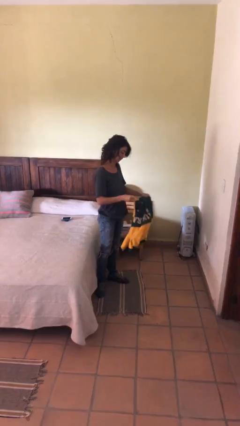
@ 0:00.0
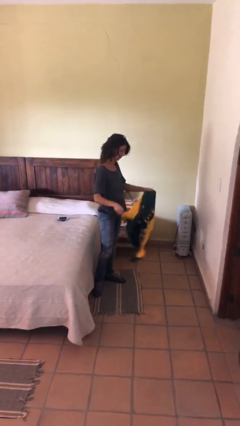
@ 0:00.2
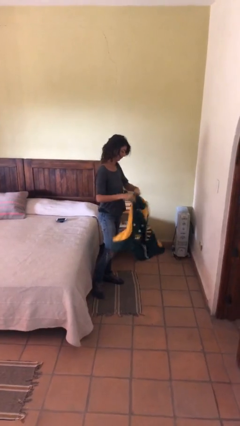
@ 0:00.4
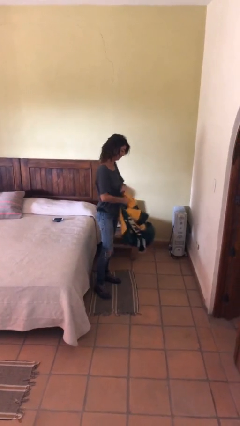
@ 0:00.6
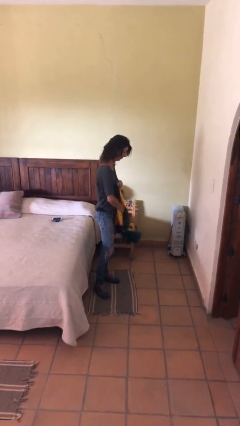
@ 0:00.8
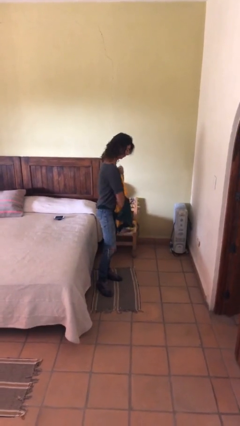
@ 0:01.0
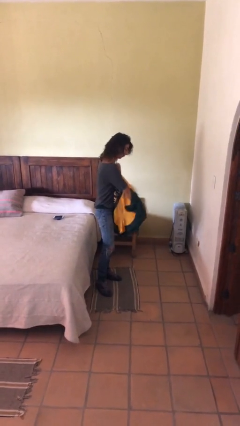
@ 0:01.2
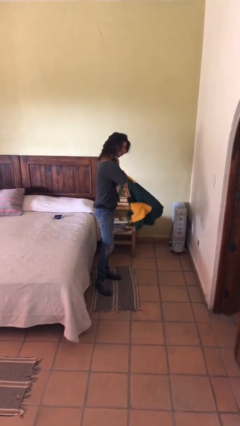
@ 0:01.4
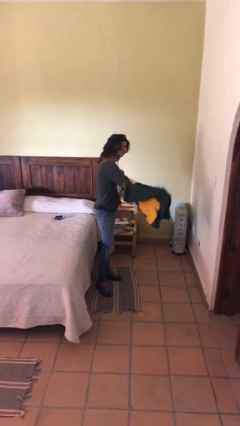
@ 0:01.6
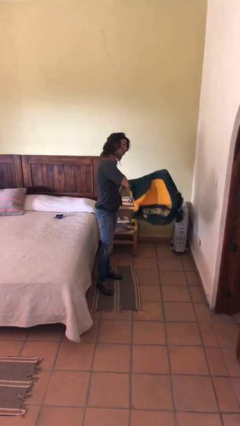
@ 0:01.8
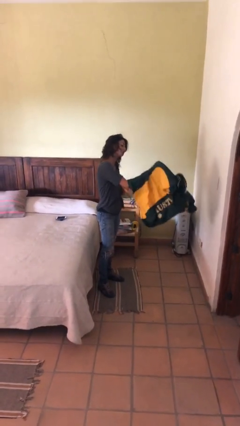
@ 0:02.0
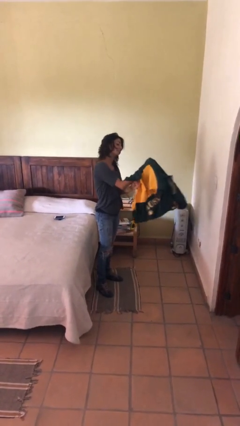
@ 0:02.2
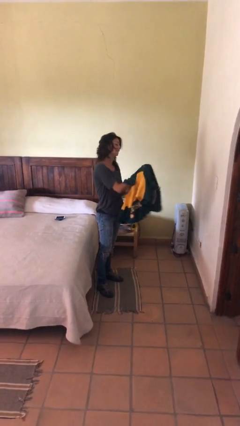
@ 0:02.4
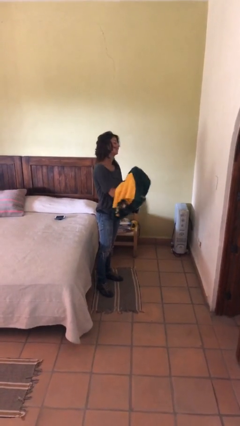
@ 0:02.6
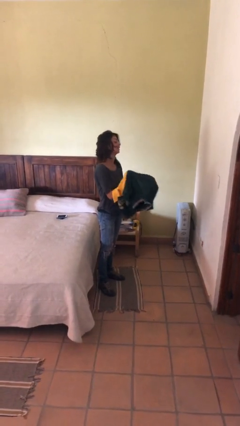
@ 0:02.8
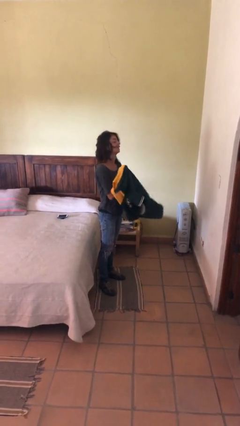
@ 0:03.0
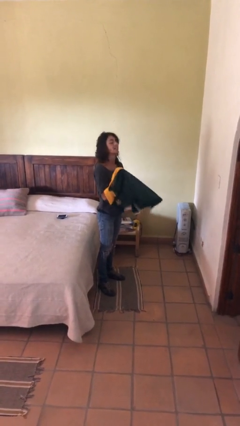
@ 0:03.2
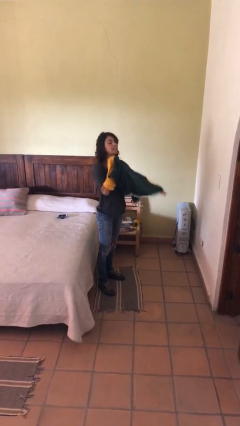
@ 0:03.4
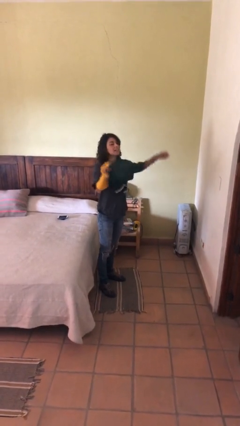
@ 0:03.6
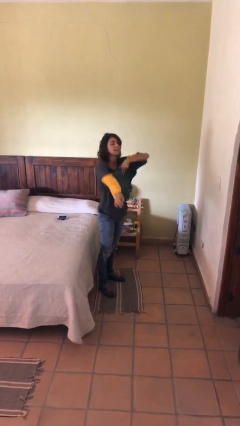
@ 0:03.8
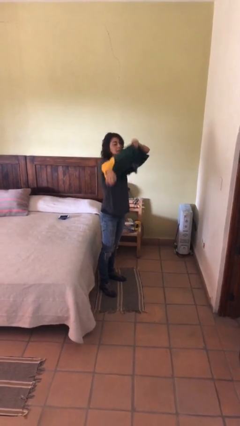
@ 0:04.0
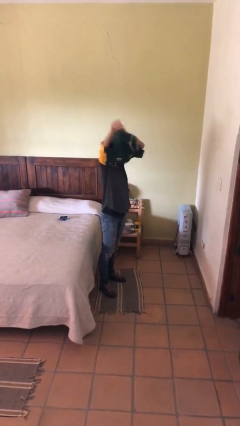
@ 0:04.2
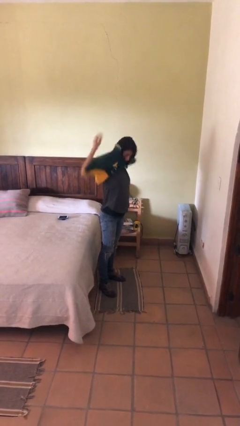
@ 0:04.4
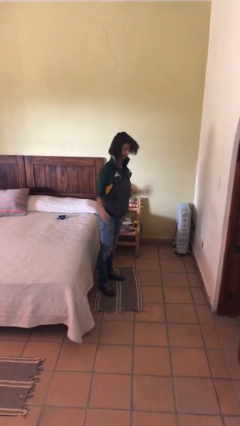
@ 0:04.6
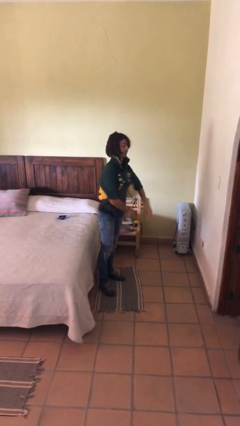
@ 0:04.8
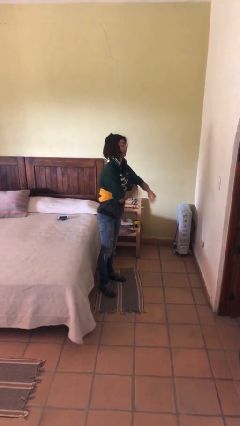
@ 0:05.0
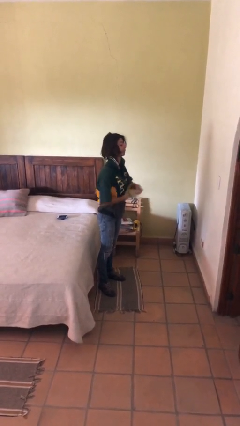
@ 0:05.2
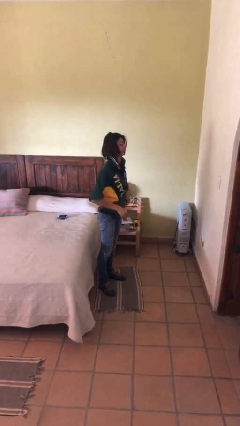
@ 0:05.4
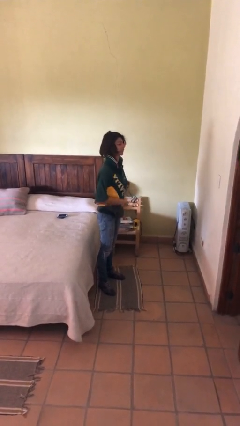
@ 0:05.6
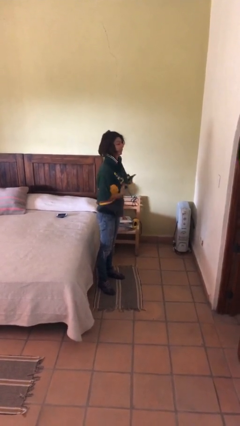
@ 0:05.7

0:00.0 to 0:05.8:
person puts on shirt

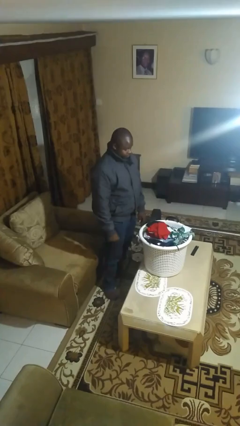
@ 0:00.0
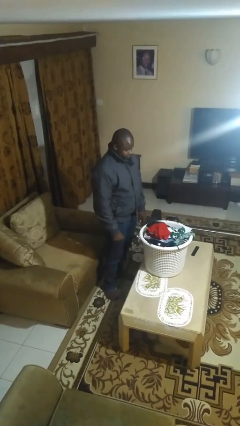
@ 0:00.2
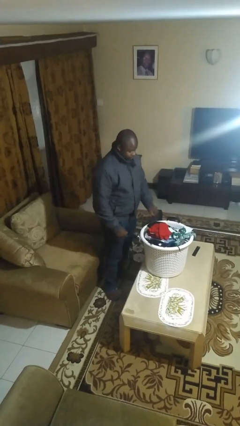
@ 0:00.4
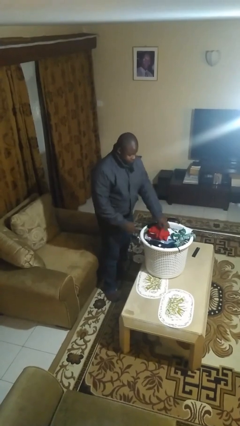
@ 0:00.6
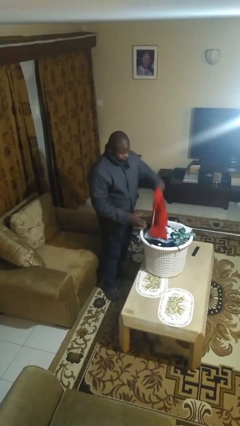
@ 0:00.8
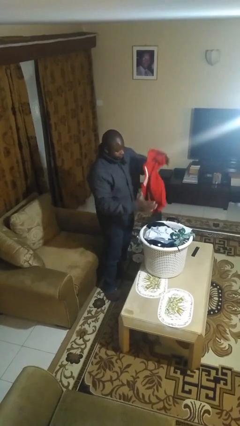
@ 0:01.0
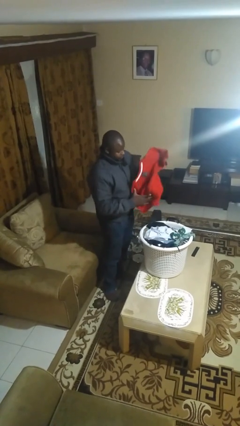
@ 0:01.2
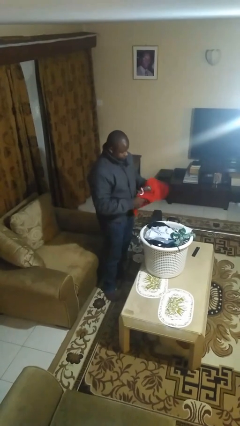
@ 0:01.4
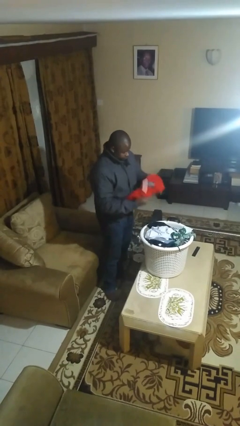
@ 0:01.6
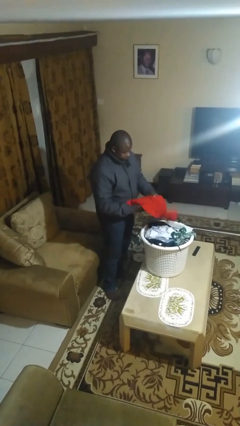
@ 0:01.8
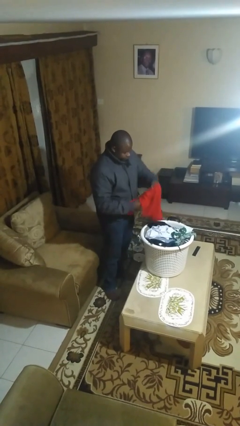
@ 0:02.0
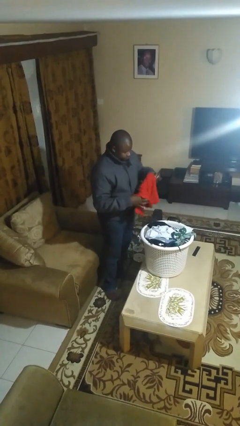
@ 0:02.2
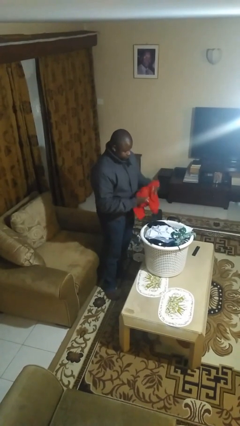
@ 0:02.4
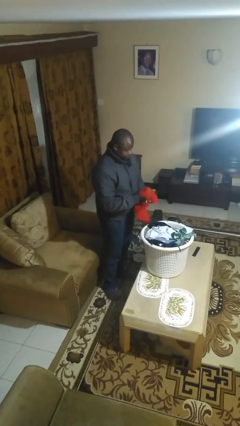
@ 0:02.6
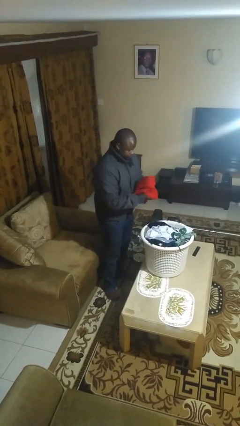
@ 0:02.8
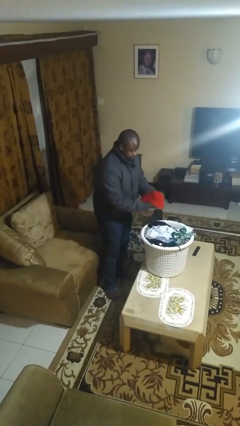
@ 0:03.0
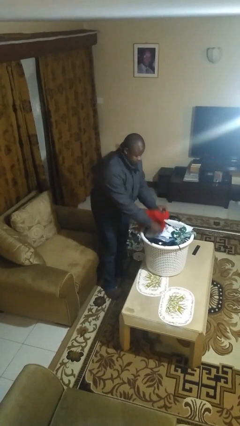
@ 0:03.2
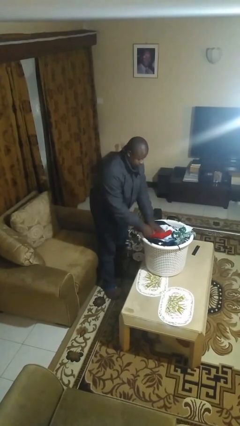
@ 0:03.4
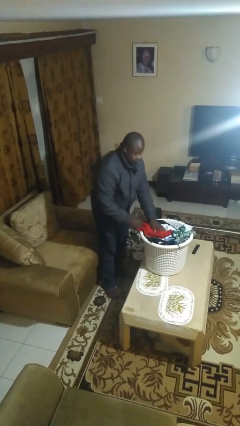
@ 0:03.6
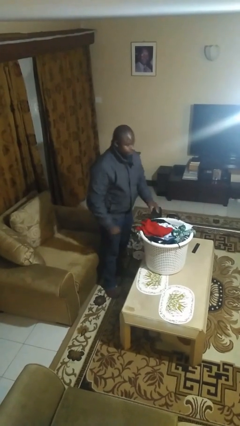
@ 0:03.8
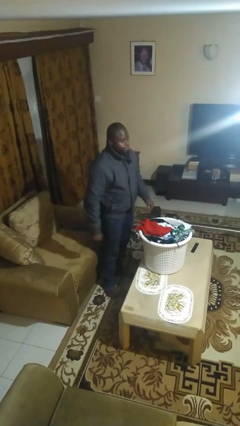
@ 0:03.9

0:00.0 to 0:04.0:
person folds shirt

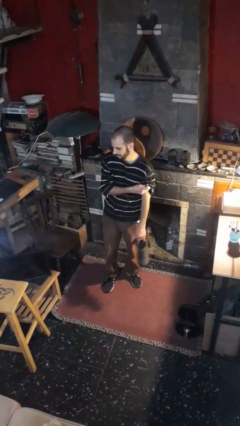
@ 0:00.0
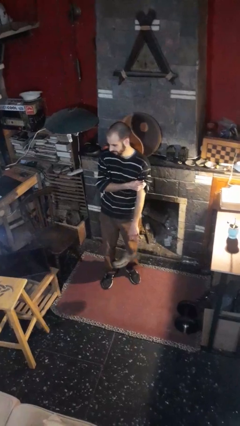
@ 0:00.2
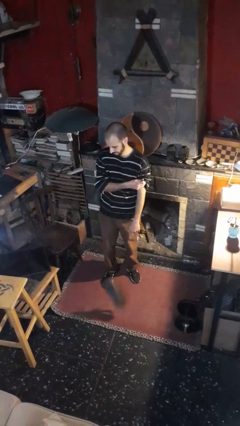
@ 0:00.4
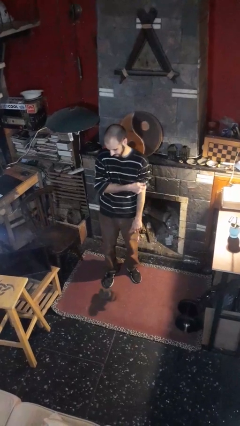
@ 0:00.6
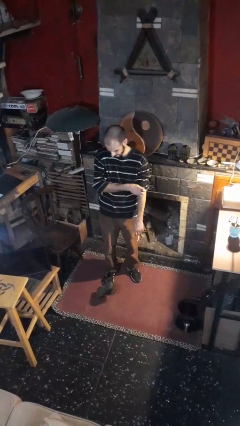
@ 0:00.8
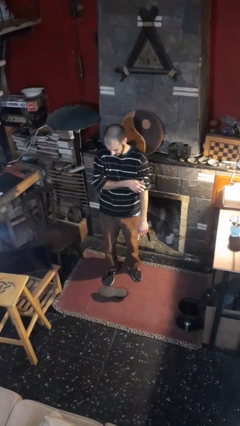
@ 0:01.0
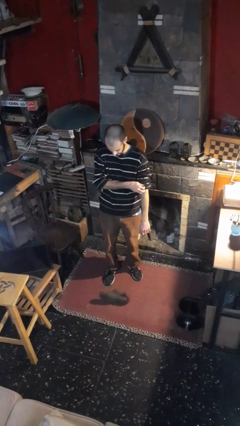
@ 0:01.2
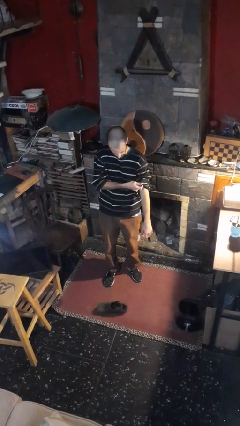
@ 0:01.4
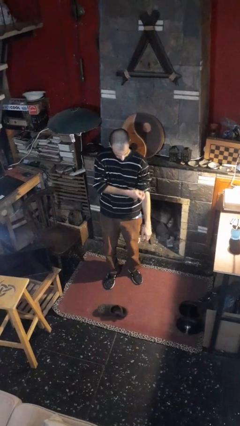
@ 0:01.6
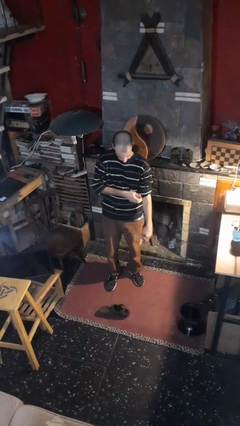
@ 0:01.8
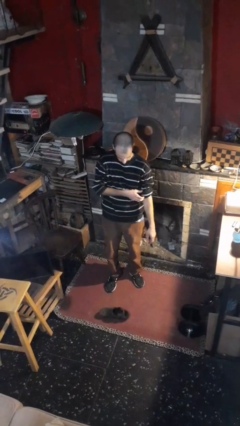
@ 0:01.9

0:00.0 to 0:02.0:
person drops object

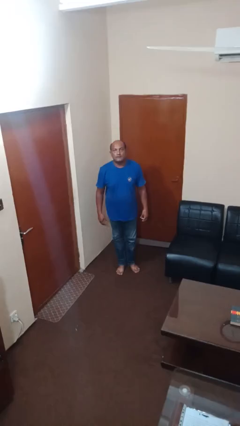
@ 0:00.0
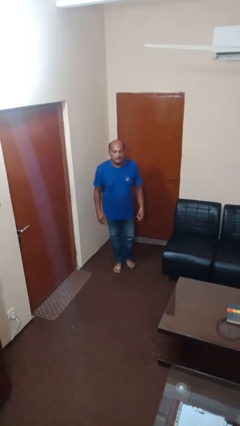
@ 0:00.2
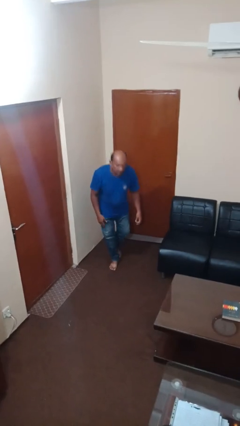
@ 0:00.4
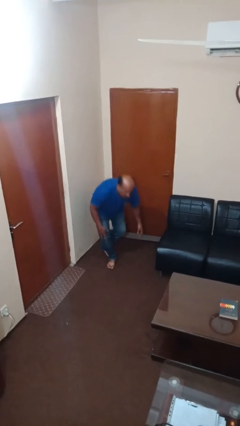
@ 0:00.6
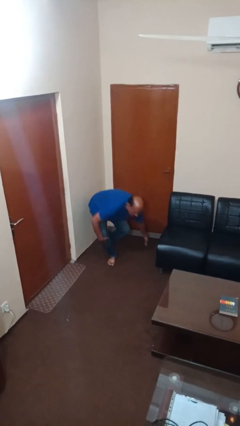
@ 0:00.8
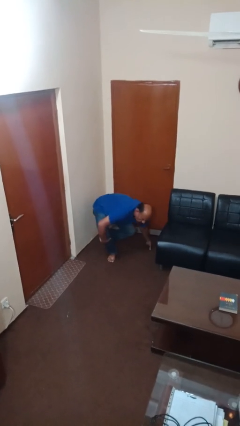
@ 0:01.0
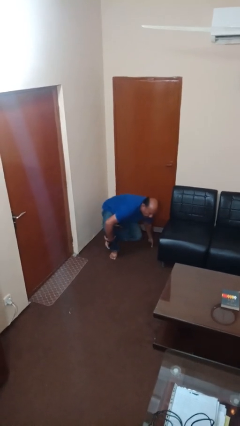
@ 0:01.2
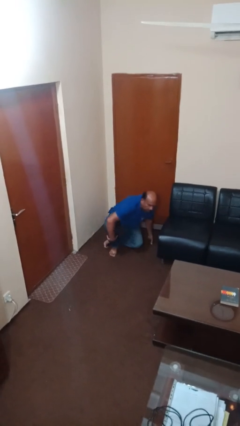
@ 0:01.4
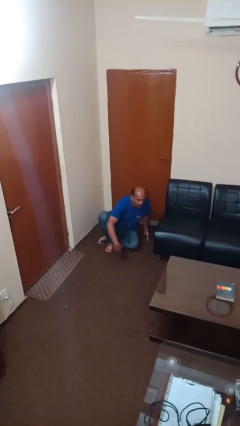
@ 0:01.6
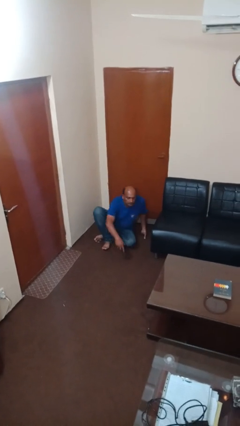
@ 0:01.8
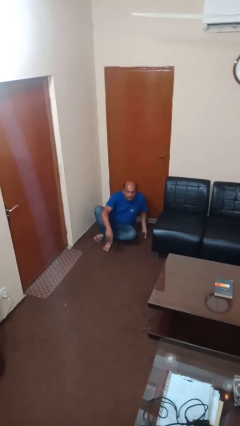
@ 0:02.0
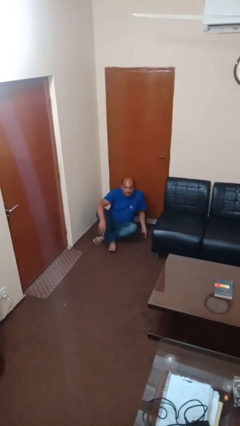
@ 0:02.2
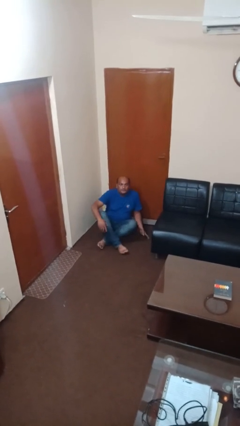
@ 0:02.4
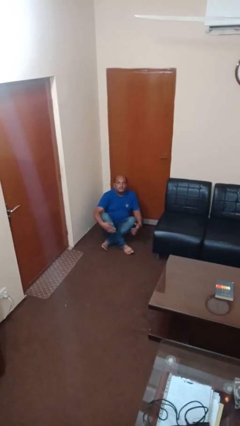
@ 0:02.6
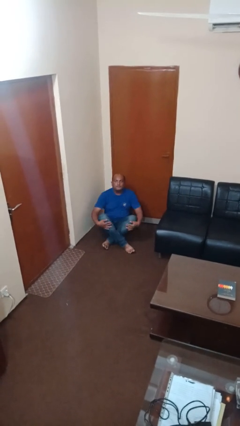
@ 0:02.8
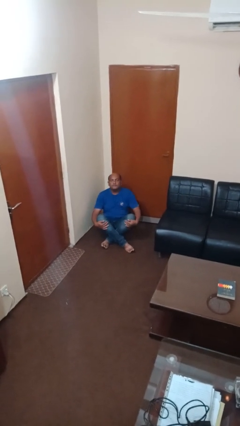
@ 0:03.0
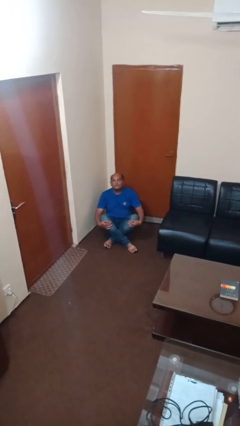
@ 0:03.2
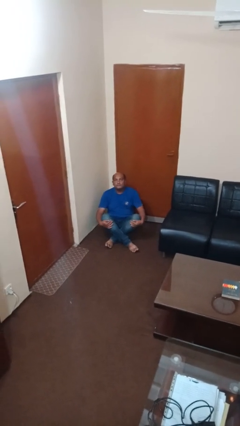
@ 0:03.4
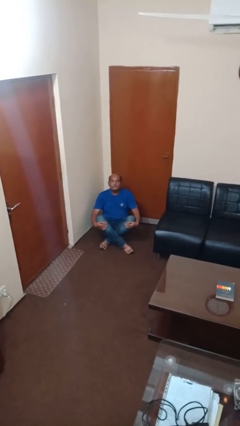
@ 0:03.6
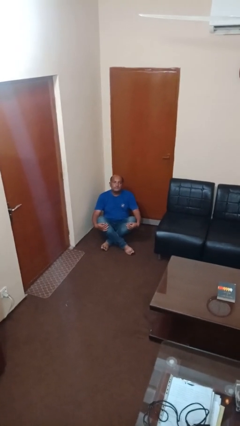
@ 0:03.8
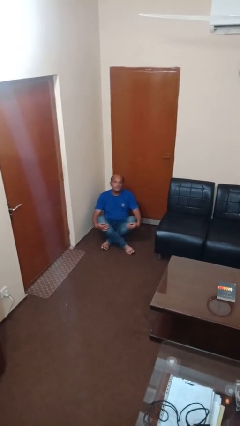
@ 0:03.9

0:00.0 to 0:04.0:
person sits crisscross

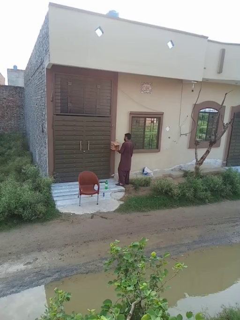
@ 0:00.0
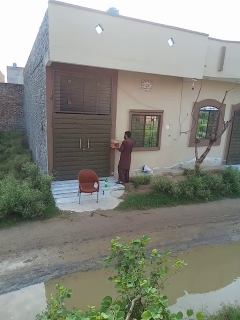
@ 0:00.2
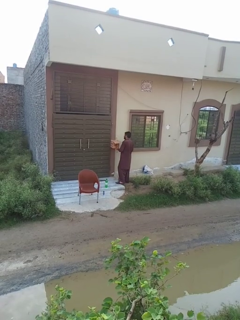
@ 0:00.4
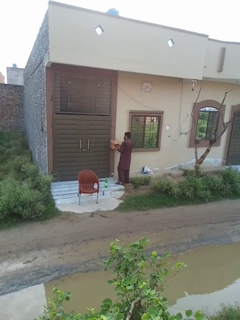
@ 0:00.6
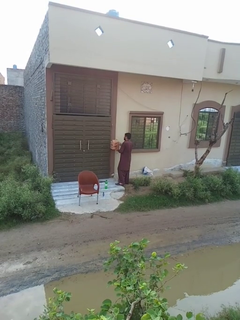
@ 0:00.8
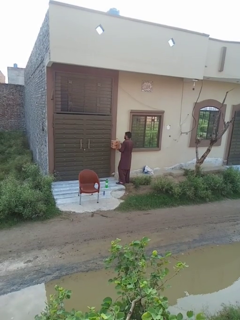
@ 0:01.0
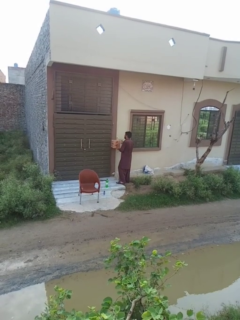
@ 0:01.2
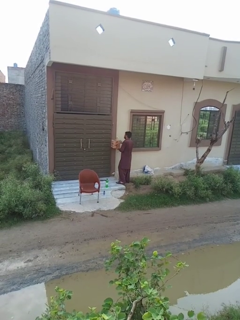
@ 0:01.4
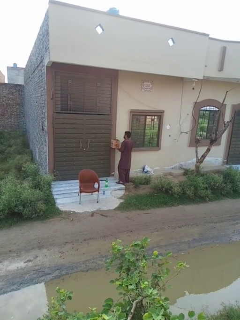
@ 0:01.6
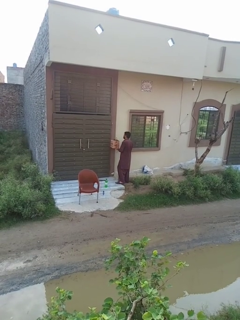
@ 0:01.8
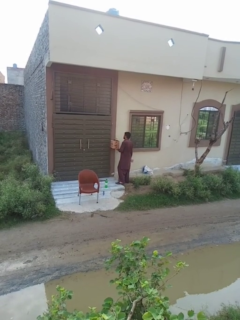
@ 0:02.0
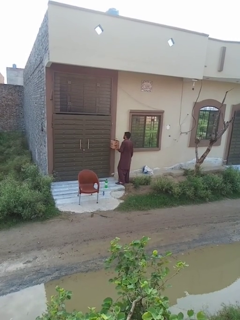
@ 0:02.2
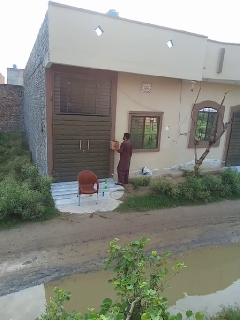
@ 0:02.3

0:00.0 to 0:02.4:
person closes mailbox
